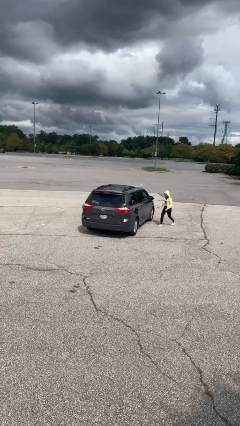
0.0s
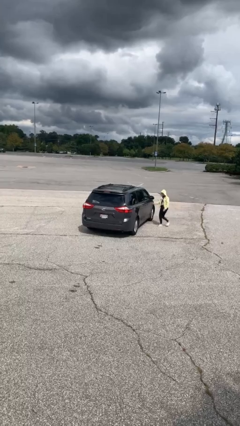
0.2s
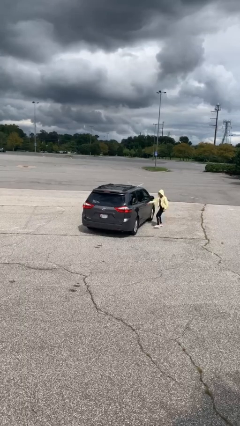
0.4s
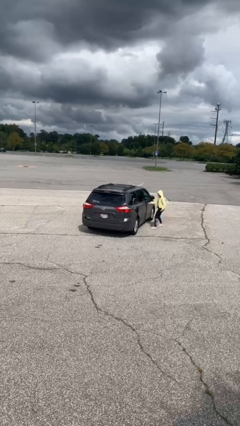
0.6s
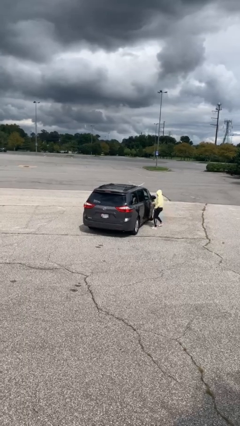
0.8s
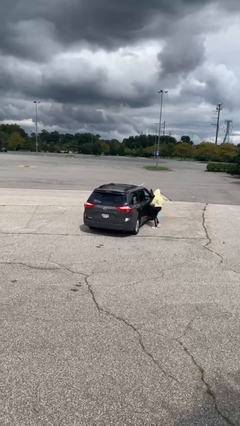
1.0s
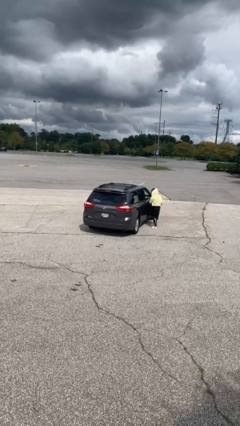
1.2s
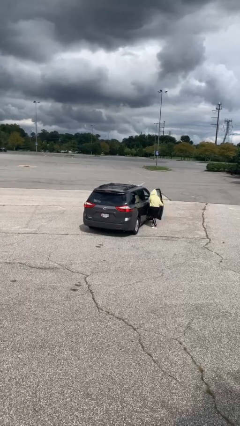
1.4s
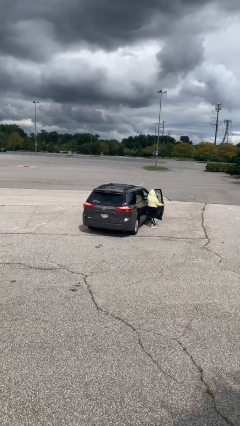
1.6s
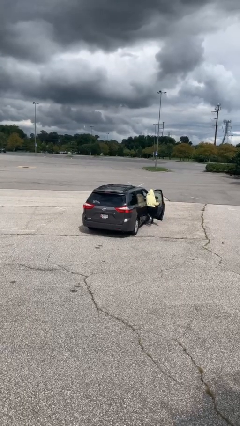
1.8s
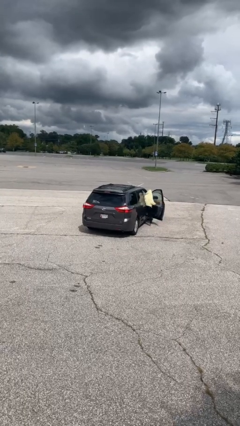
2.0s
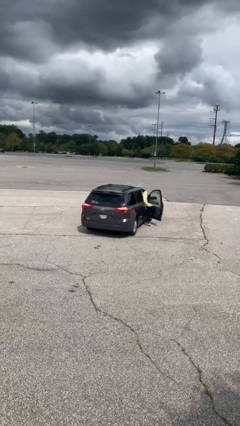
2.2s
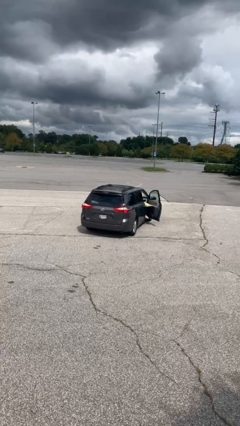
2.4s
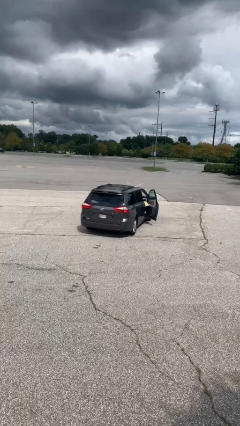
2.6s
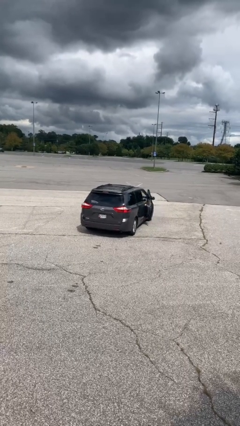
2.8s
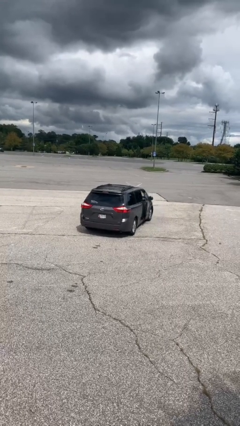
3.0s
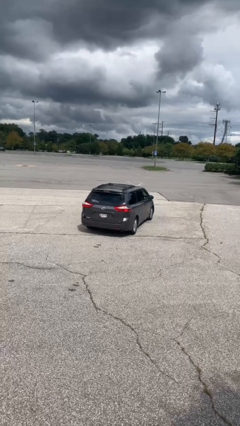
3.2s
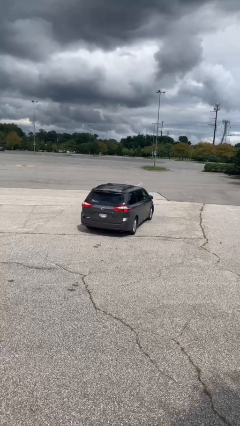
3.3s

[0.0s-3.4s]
car picks up person

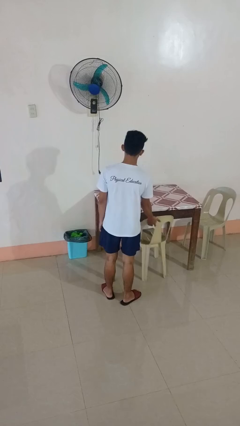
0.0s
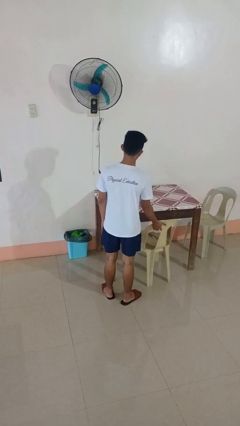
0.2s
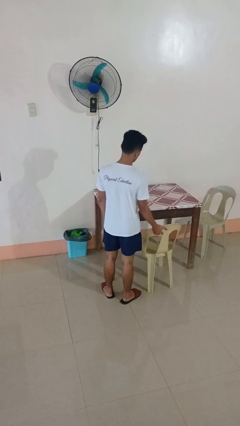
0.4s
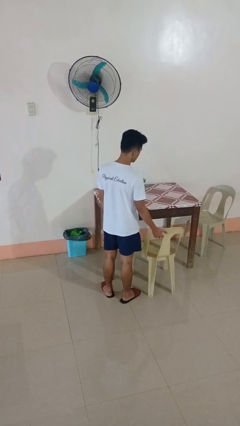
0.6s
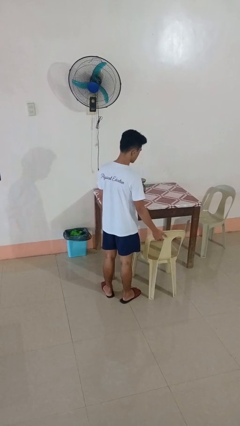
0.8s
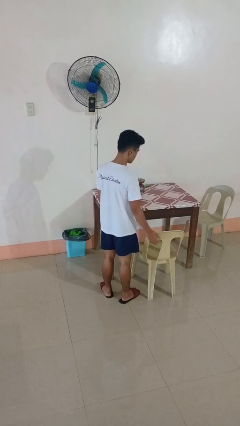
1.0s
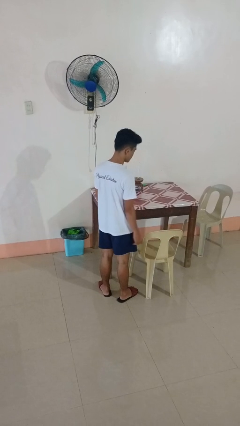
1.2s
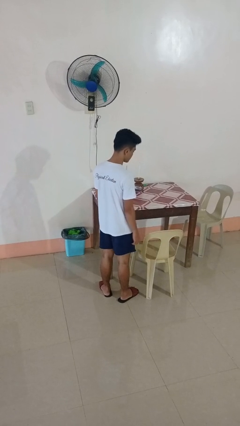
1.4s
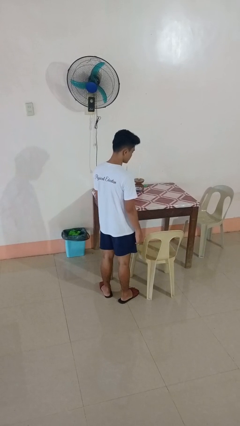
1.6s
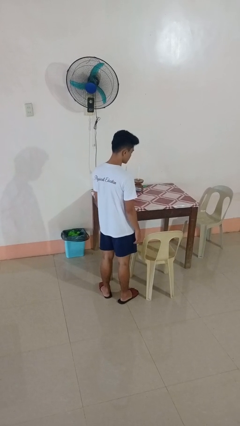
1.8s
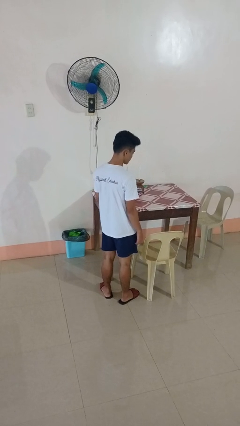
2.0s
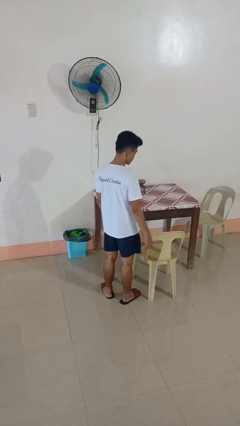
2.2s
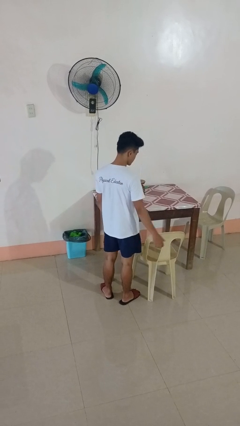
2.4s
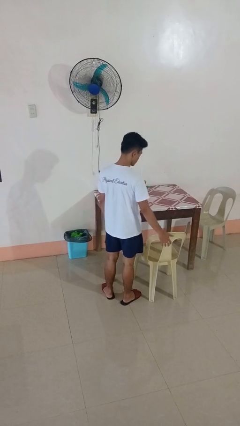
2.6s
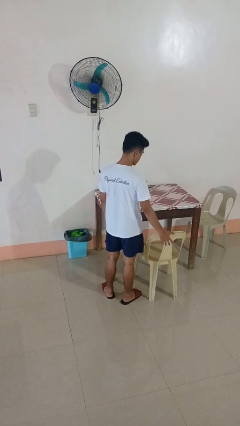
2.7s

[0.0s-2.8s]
person pulls out chair

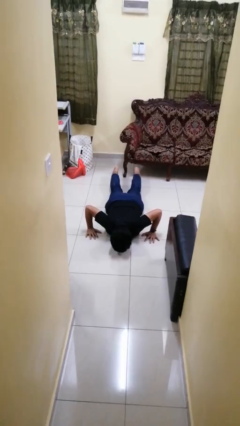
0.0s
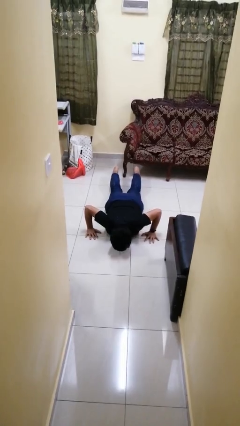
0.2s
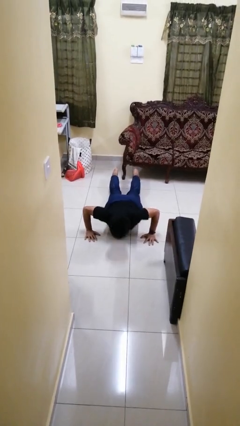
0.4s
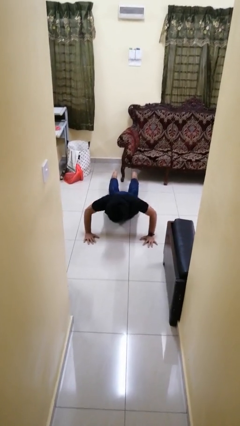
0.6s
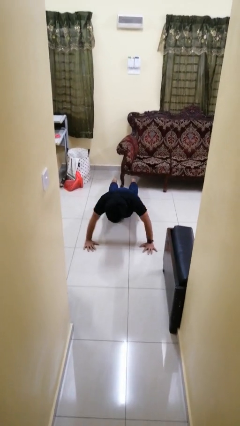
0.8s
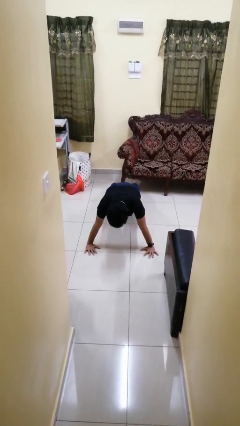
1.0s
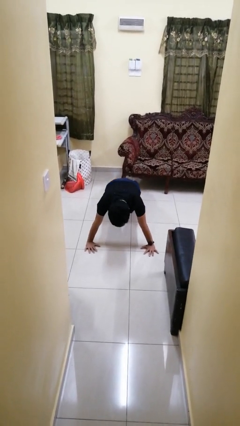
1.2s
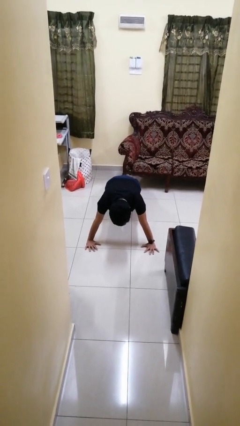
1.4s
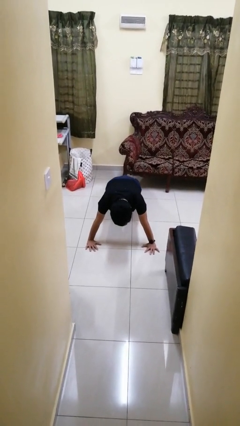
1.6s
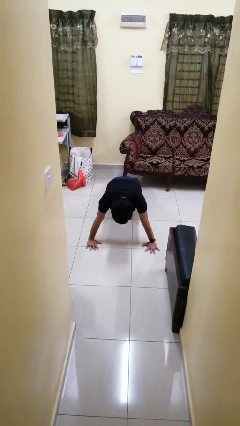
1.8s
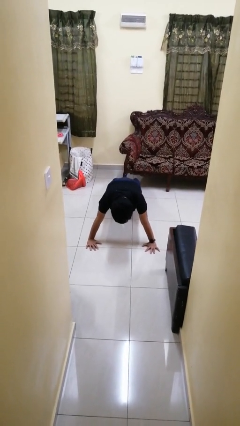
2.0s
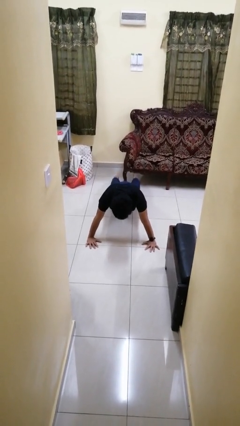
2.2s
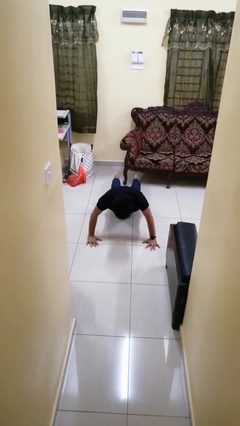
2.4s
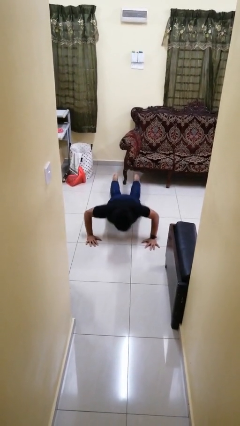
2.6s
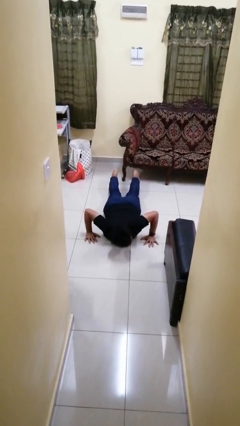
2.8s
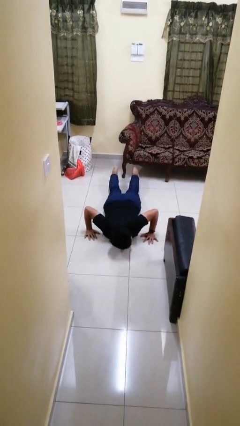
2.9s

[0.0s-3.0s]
person exercises with pushup

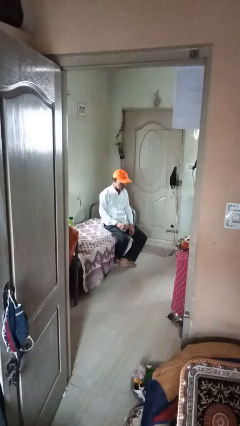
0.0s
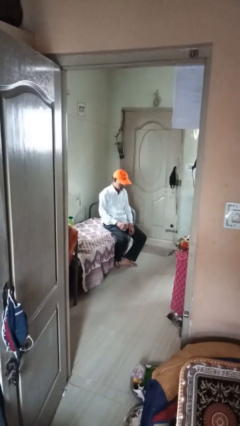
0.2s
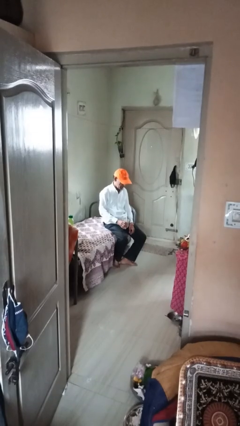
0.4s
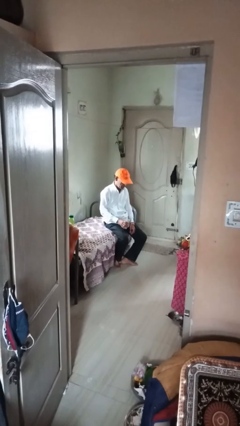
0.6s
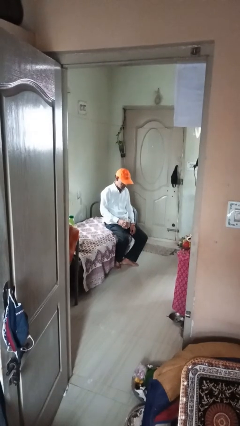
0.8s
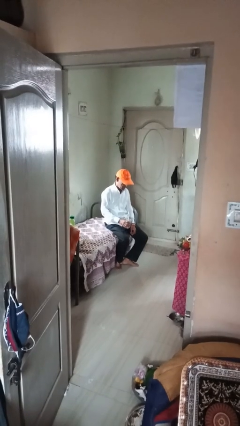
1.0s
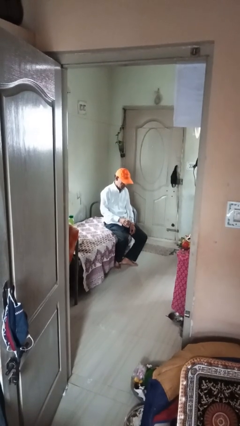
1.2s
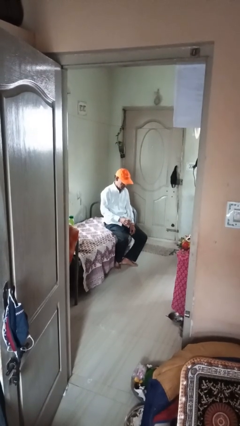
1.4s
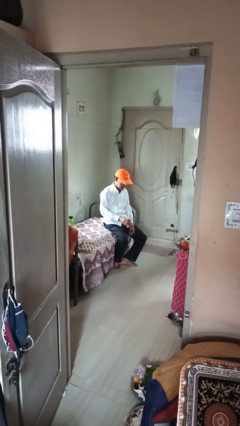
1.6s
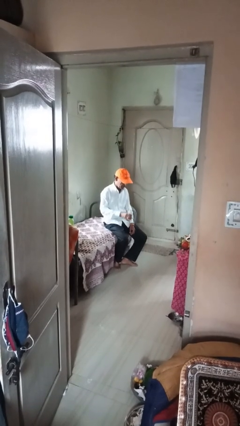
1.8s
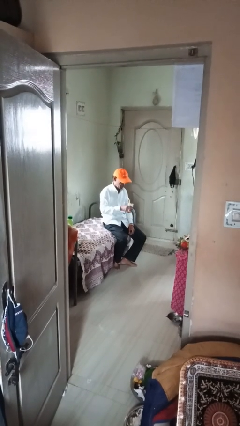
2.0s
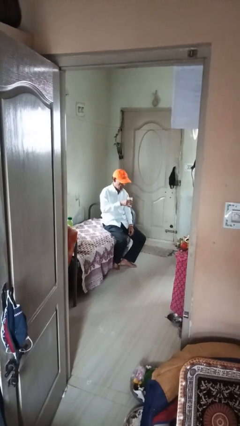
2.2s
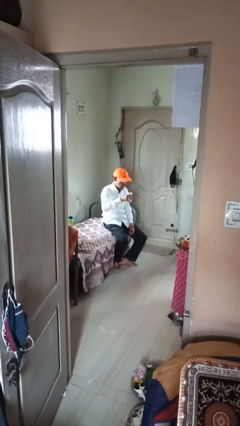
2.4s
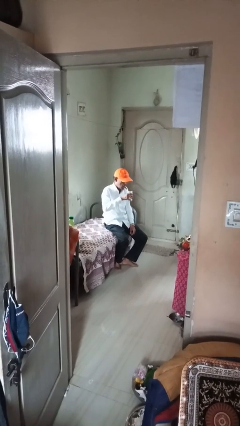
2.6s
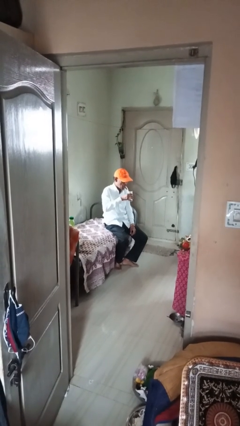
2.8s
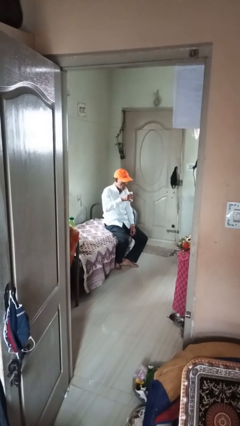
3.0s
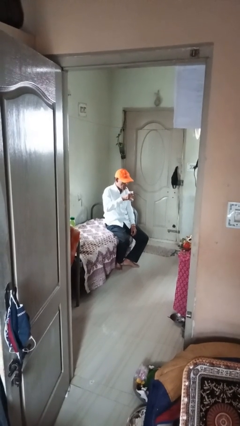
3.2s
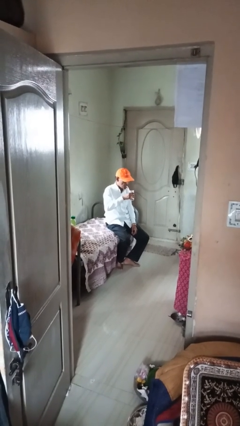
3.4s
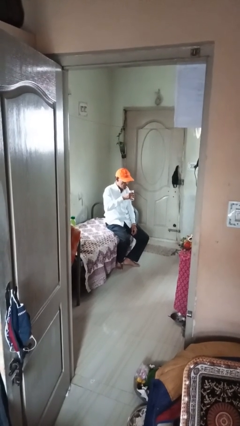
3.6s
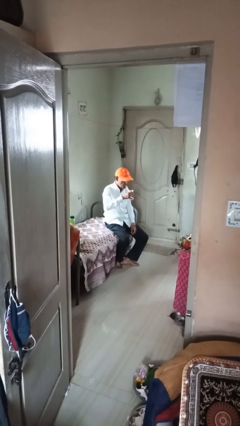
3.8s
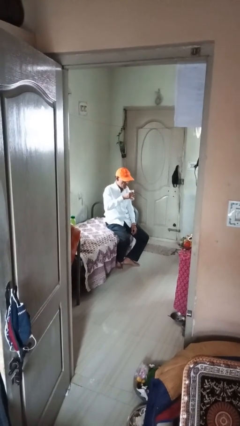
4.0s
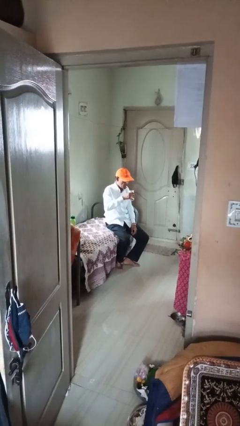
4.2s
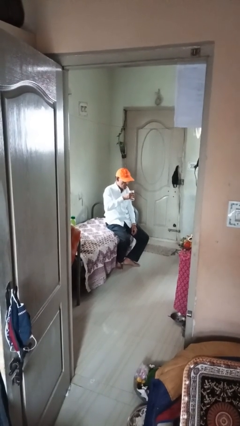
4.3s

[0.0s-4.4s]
person drinks from straw

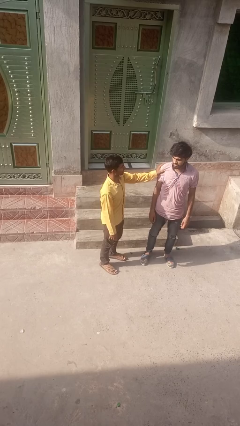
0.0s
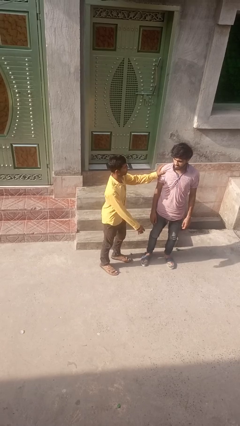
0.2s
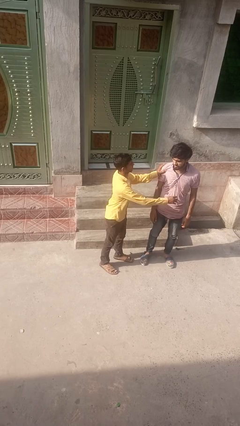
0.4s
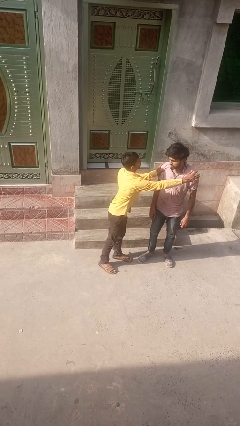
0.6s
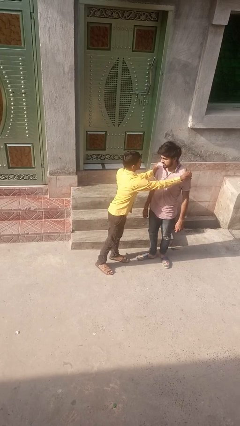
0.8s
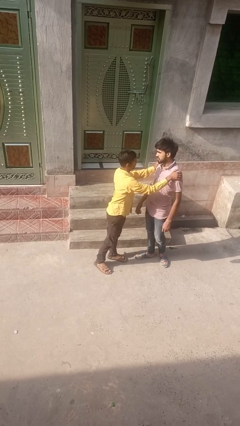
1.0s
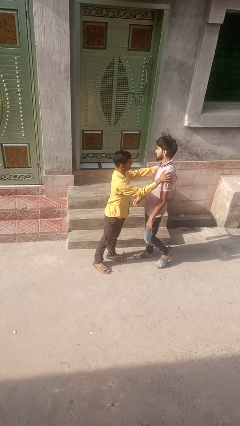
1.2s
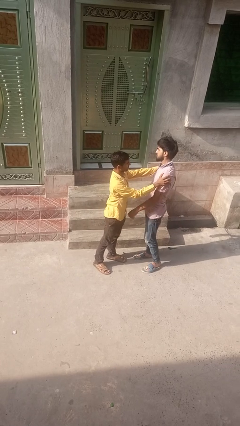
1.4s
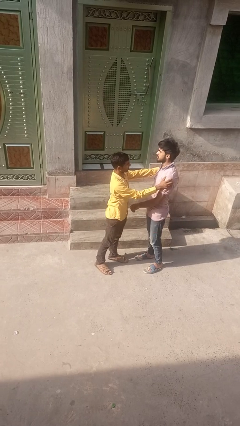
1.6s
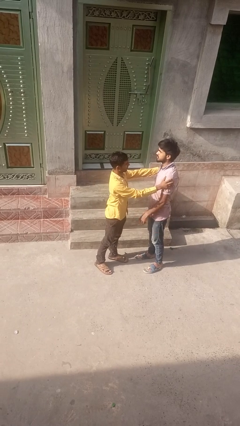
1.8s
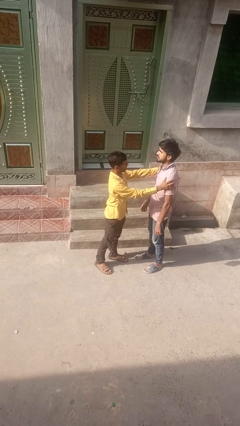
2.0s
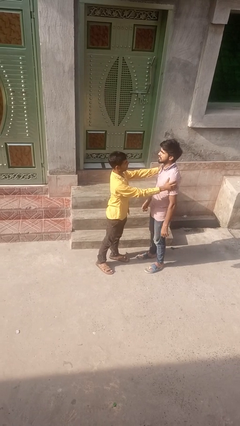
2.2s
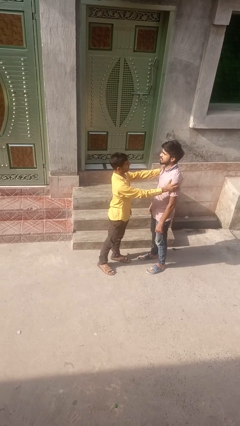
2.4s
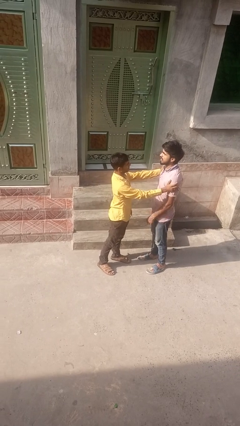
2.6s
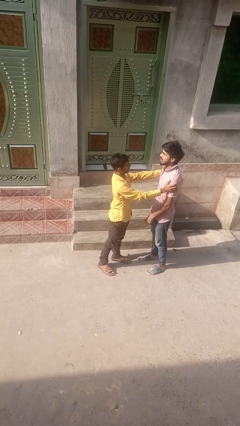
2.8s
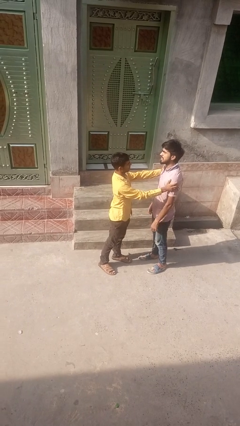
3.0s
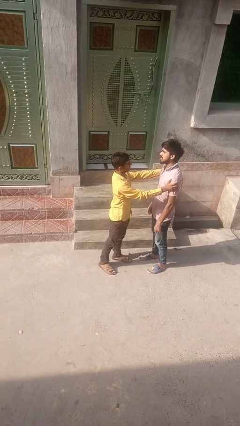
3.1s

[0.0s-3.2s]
person spins person around

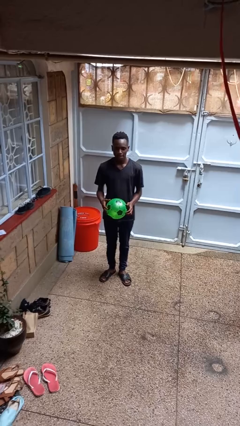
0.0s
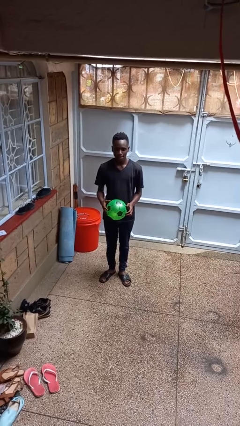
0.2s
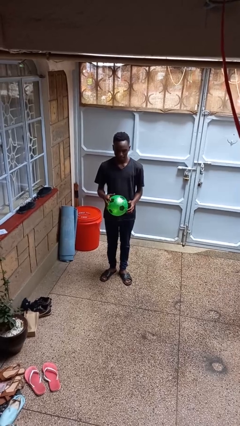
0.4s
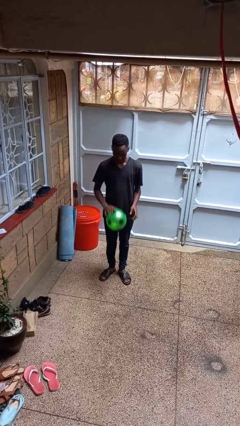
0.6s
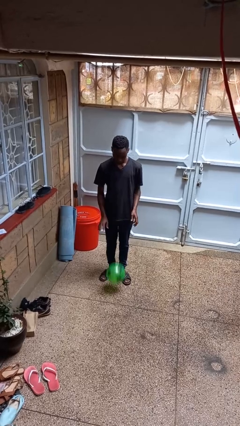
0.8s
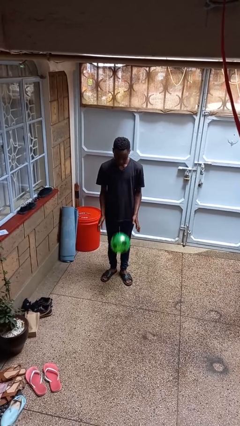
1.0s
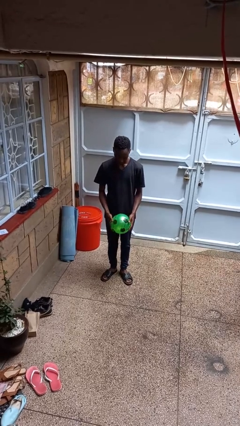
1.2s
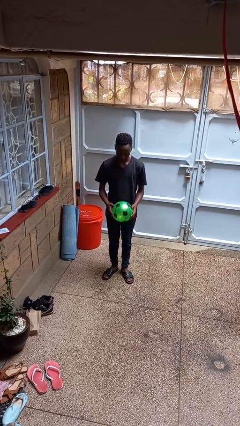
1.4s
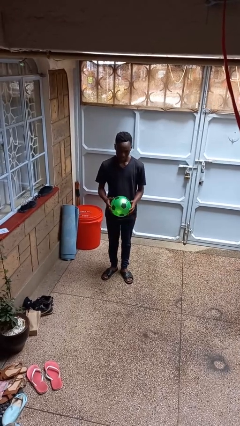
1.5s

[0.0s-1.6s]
person bounces ball on floor
